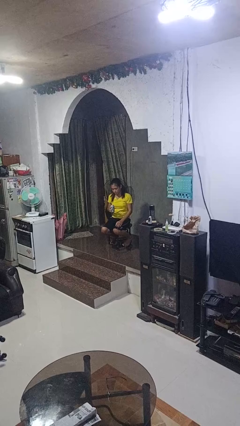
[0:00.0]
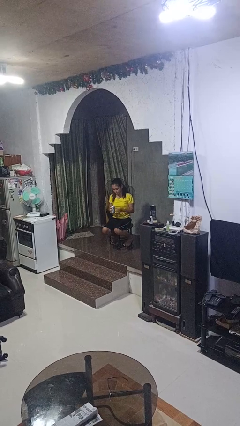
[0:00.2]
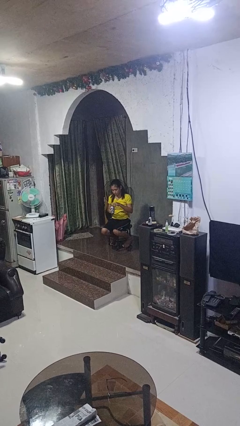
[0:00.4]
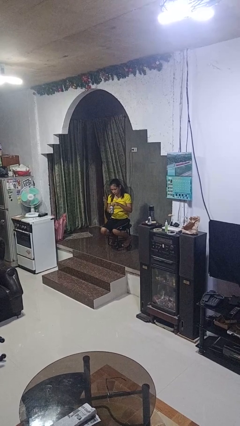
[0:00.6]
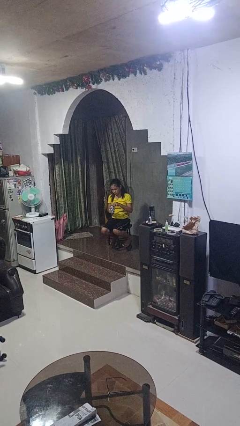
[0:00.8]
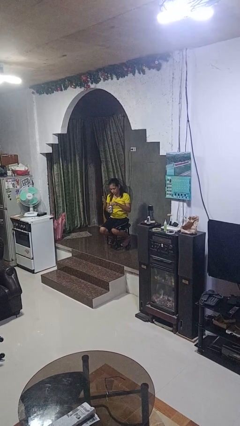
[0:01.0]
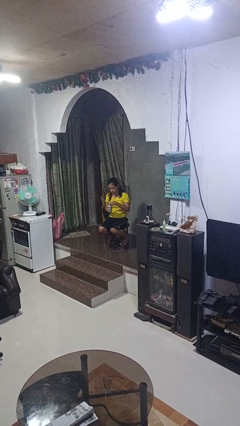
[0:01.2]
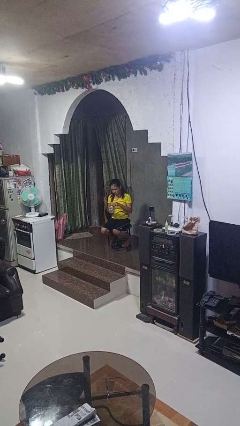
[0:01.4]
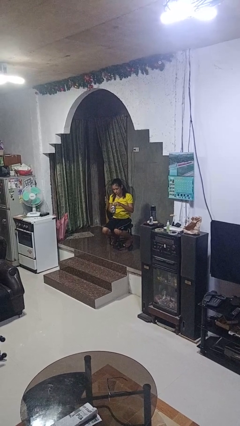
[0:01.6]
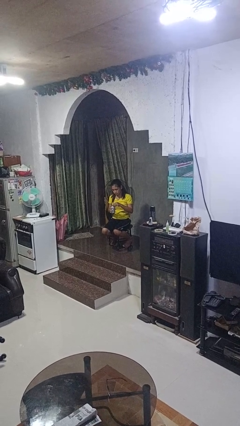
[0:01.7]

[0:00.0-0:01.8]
person opens beverage can

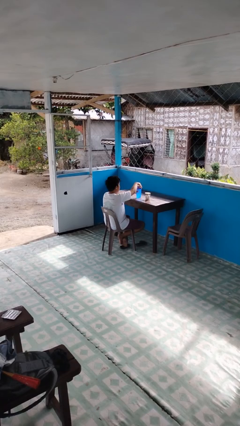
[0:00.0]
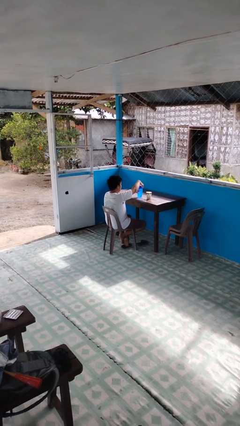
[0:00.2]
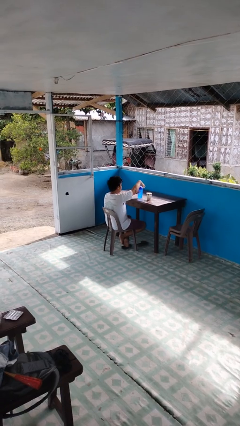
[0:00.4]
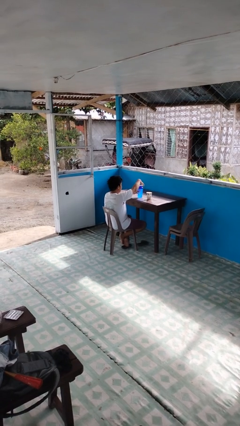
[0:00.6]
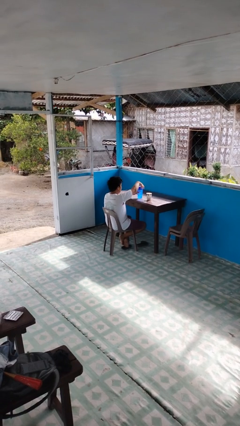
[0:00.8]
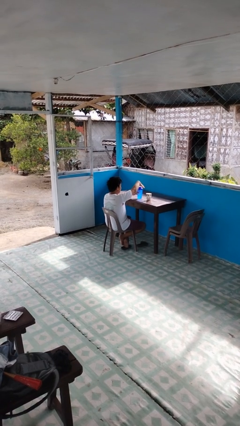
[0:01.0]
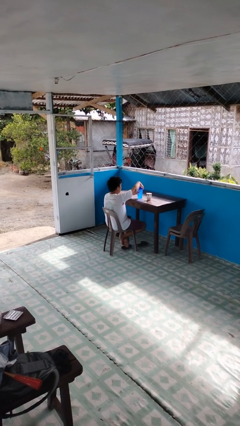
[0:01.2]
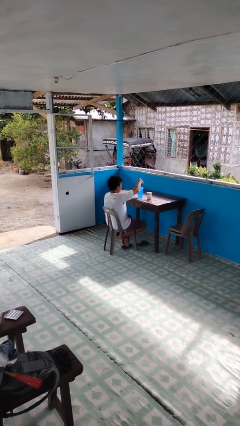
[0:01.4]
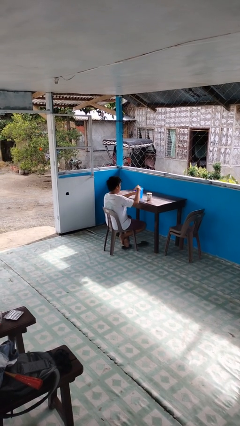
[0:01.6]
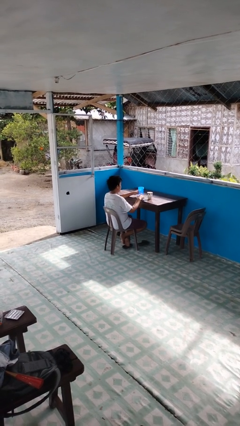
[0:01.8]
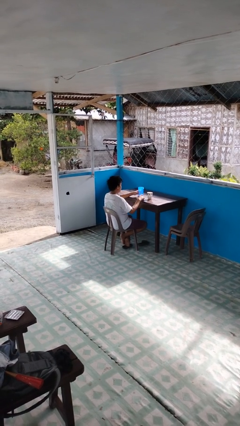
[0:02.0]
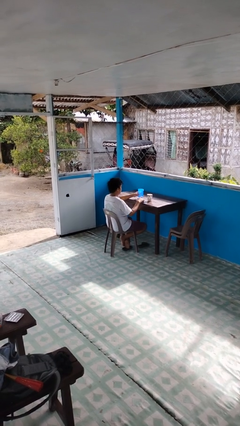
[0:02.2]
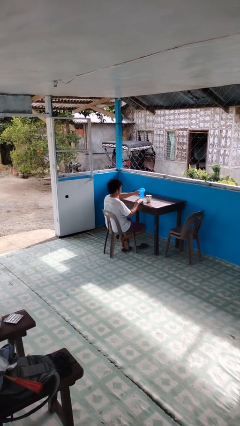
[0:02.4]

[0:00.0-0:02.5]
person unscrews lid from bottle

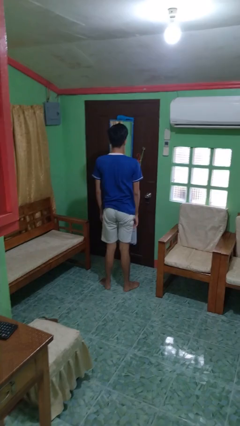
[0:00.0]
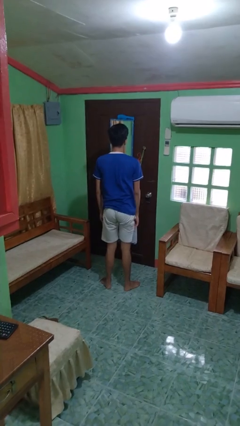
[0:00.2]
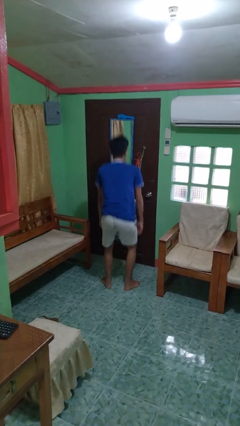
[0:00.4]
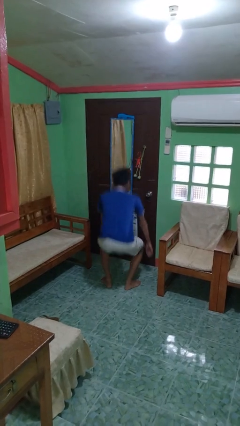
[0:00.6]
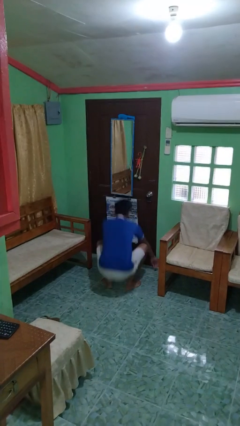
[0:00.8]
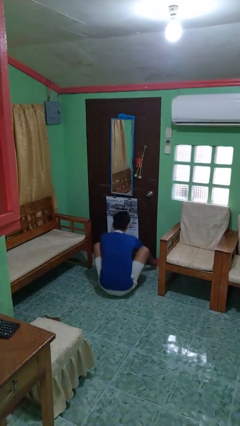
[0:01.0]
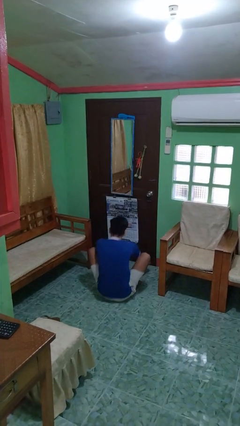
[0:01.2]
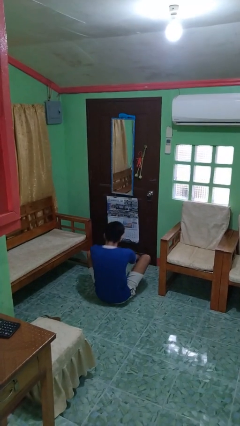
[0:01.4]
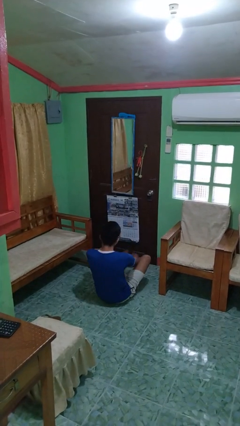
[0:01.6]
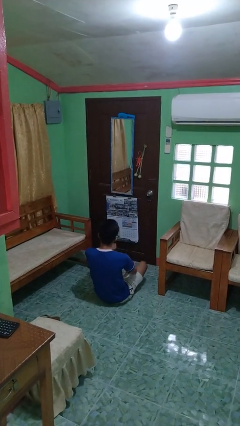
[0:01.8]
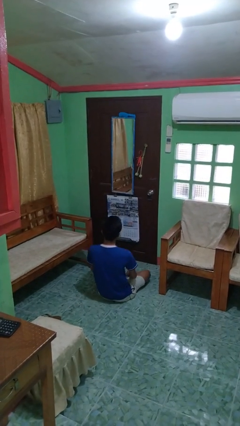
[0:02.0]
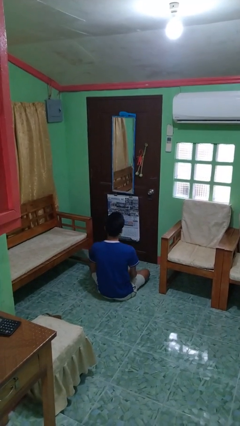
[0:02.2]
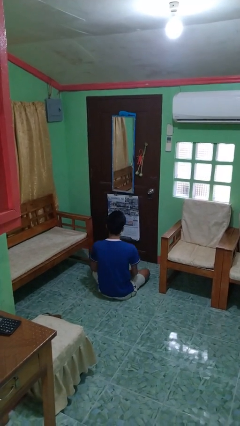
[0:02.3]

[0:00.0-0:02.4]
person sits crisscross

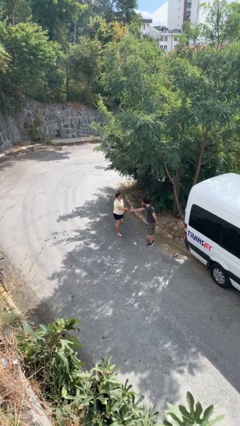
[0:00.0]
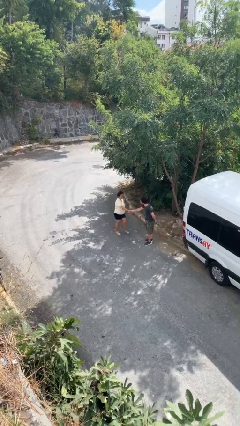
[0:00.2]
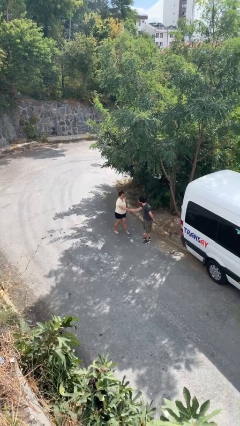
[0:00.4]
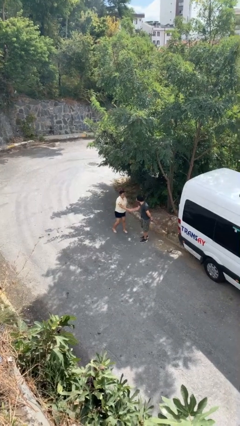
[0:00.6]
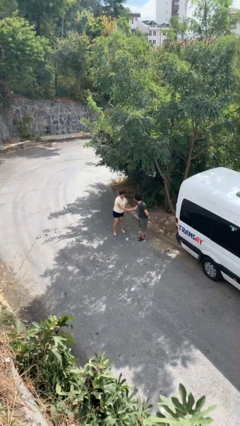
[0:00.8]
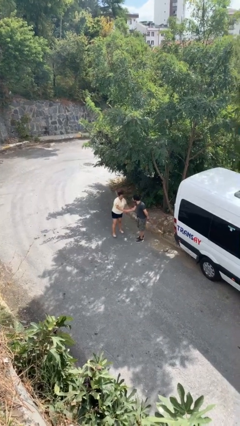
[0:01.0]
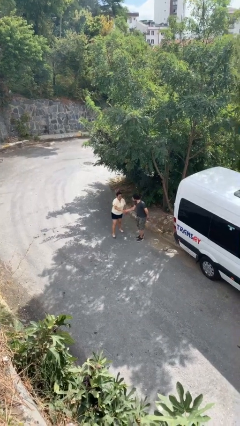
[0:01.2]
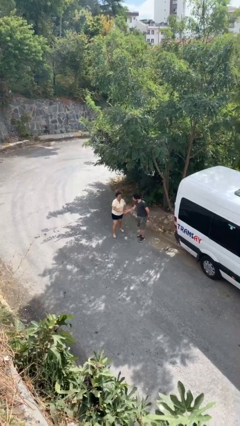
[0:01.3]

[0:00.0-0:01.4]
person shakes hand

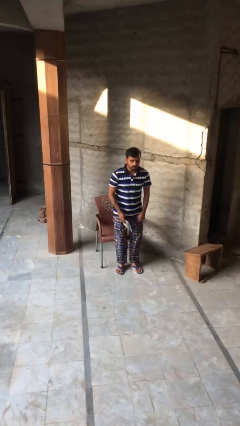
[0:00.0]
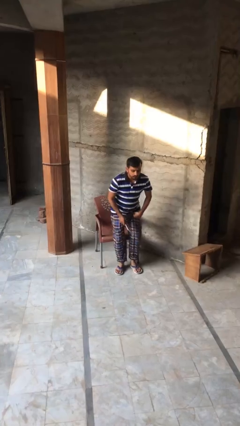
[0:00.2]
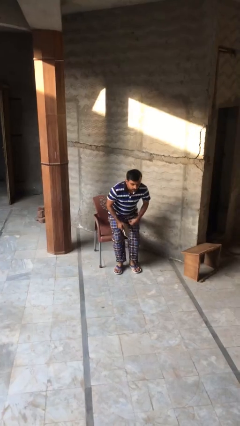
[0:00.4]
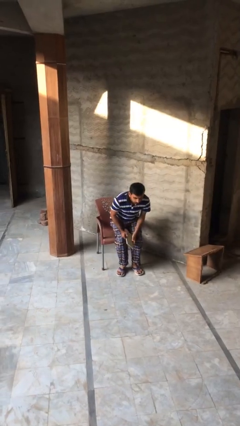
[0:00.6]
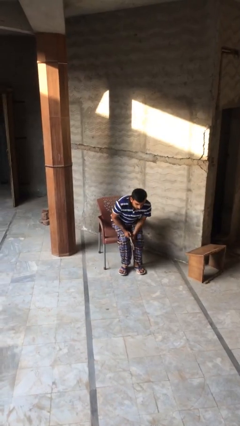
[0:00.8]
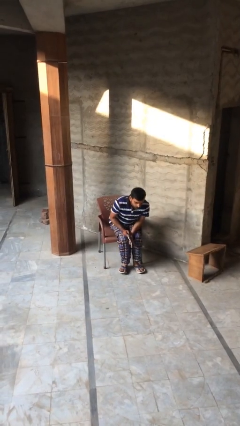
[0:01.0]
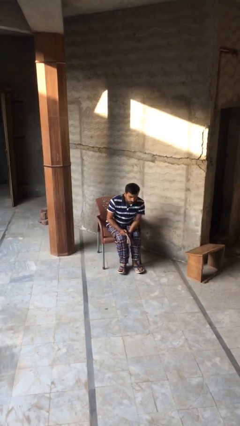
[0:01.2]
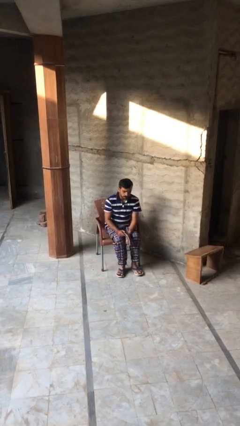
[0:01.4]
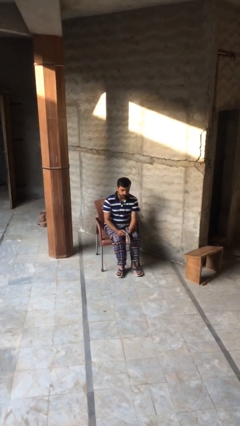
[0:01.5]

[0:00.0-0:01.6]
person sits down

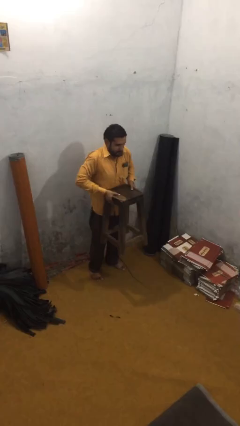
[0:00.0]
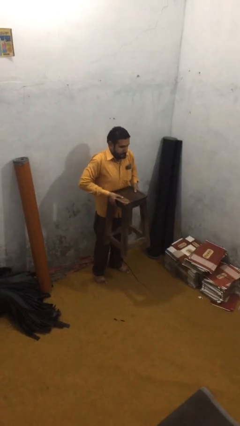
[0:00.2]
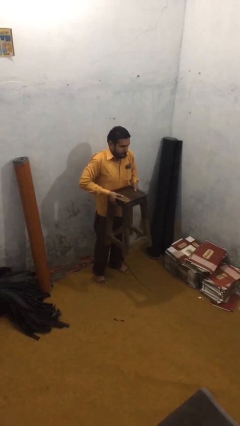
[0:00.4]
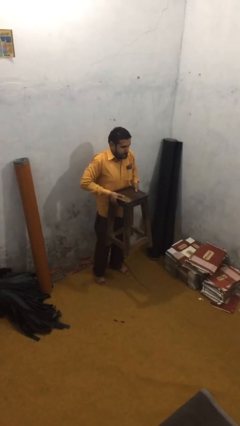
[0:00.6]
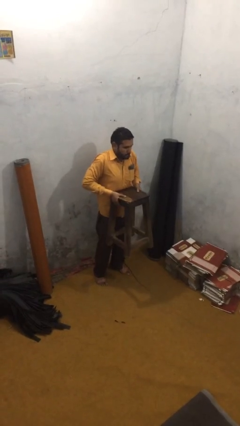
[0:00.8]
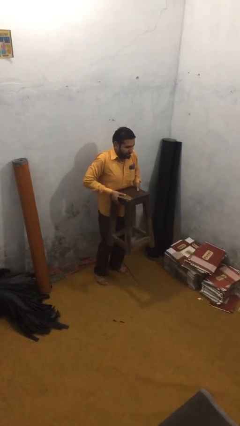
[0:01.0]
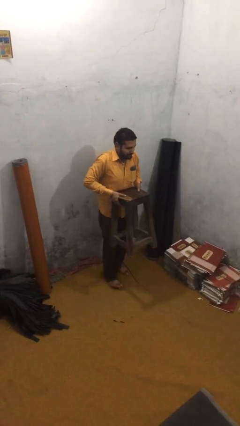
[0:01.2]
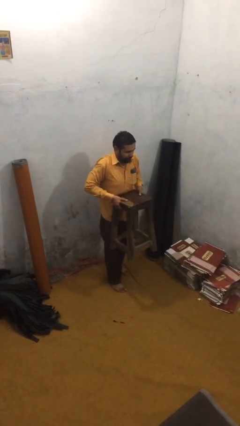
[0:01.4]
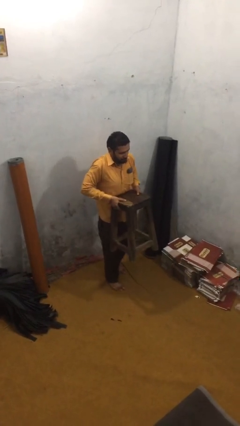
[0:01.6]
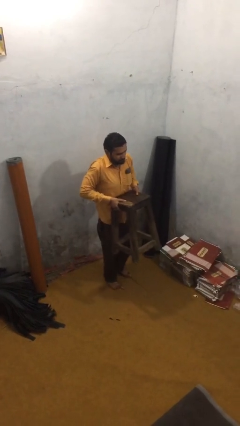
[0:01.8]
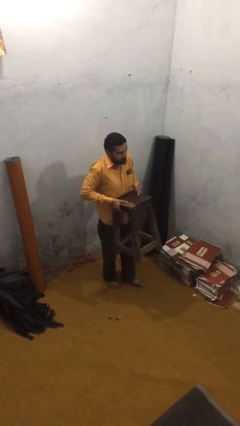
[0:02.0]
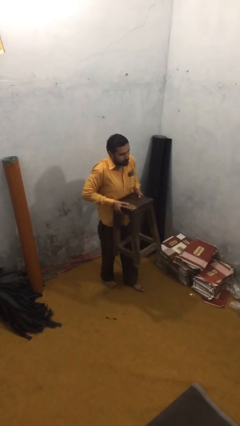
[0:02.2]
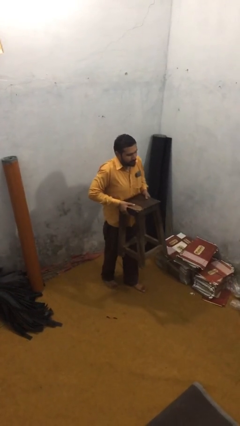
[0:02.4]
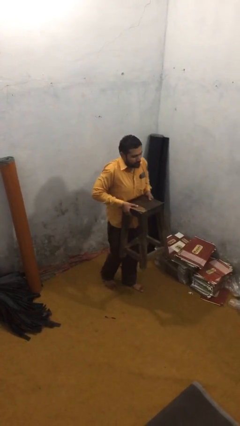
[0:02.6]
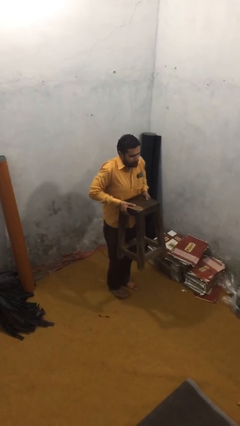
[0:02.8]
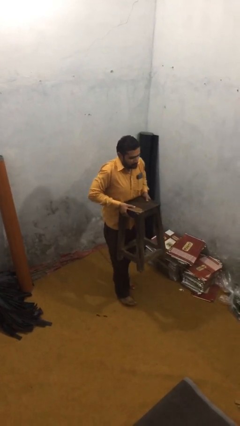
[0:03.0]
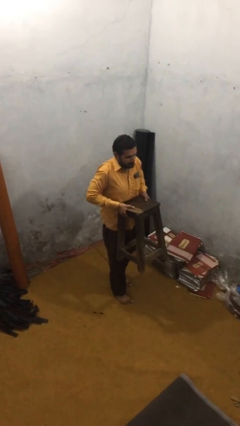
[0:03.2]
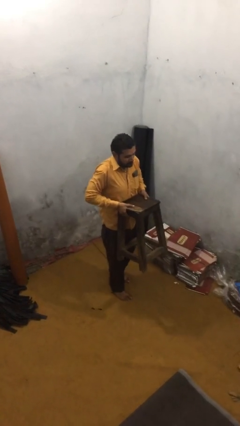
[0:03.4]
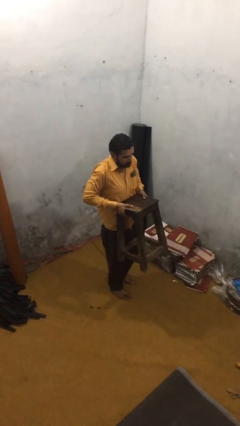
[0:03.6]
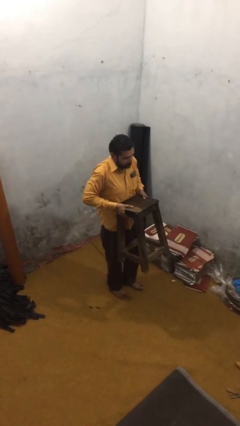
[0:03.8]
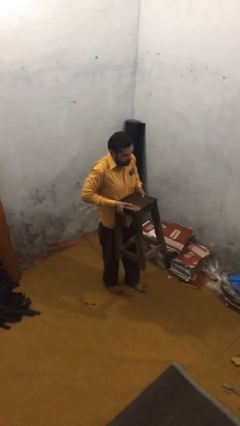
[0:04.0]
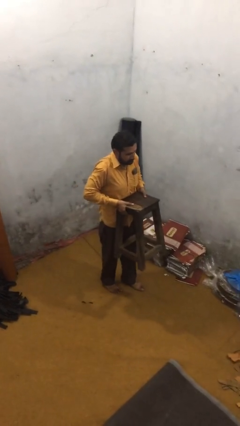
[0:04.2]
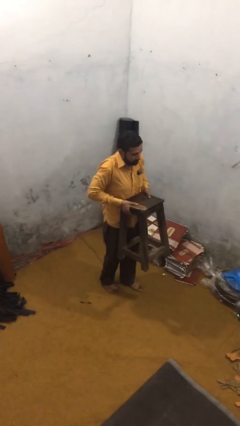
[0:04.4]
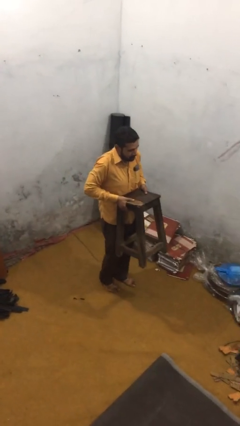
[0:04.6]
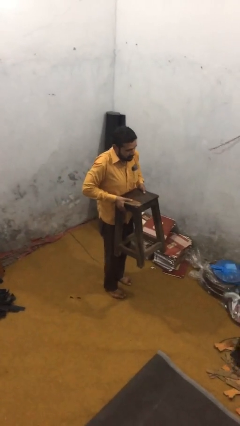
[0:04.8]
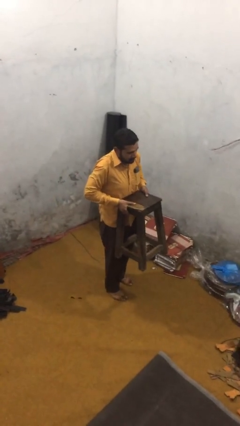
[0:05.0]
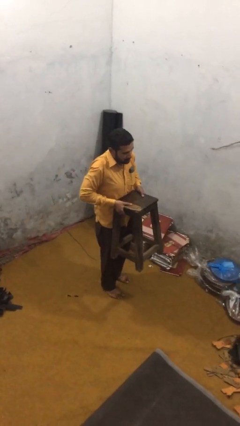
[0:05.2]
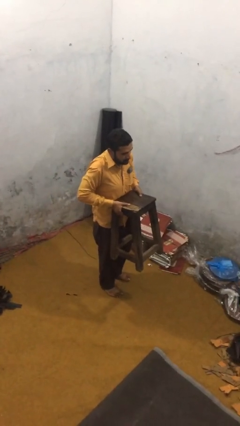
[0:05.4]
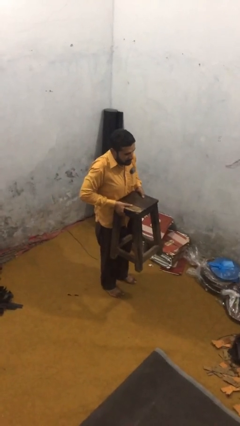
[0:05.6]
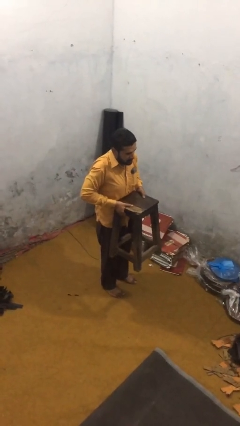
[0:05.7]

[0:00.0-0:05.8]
person carries heavy object

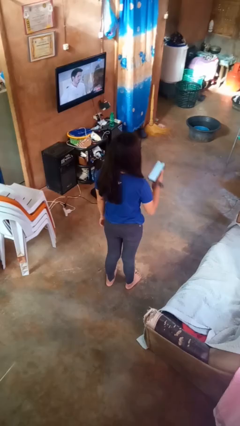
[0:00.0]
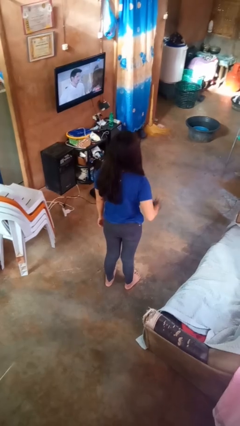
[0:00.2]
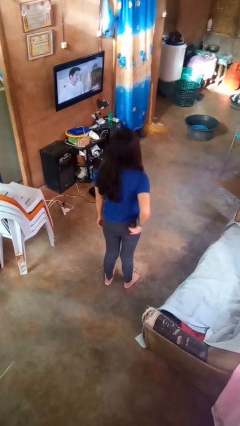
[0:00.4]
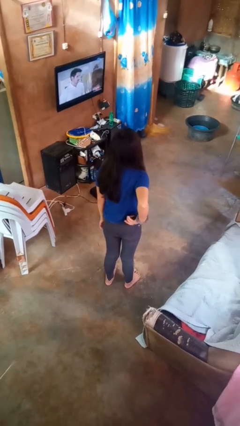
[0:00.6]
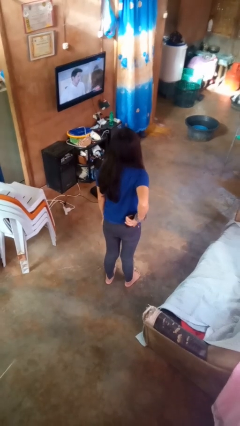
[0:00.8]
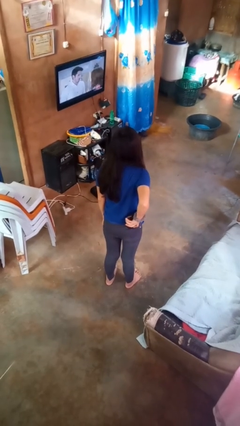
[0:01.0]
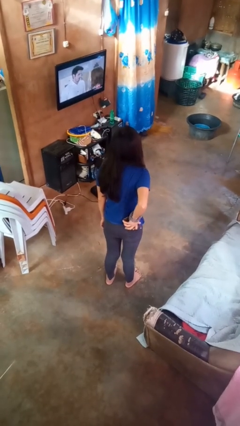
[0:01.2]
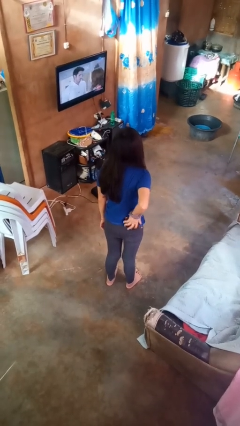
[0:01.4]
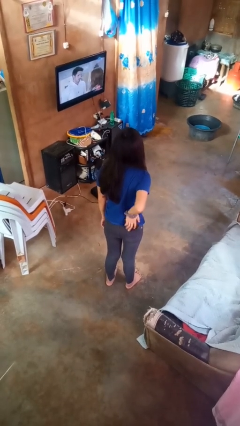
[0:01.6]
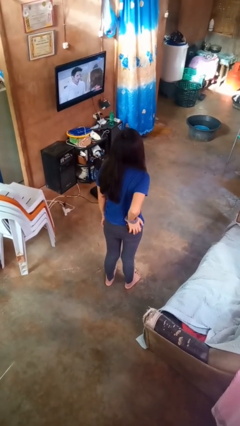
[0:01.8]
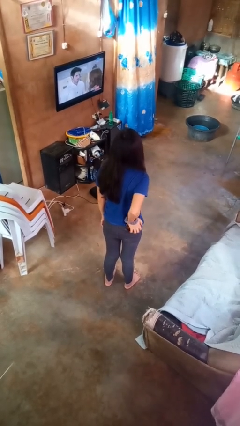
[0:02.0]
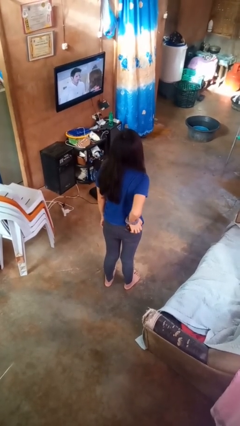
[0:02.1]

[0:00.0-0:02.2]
person puts phone into pocket
